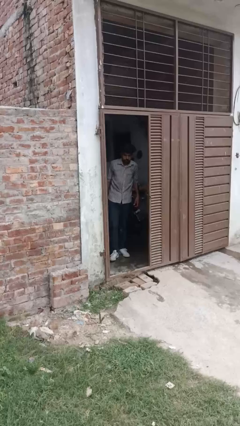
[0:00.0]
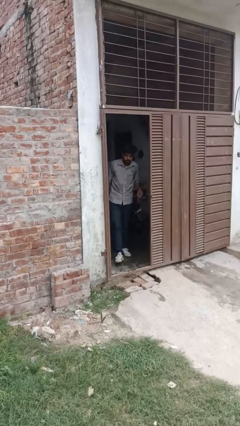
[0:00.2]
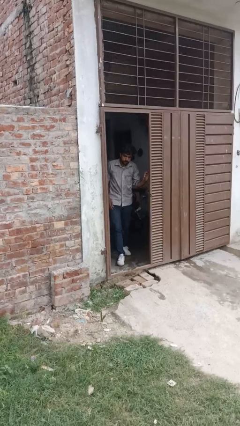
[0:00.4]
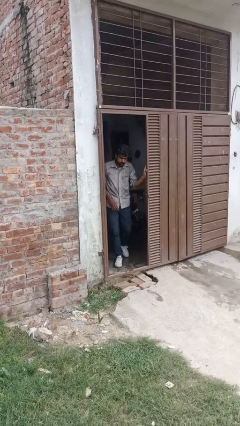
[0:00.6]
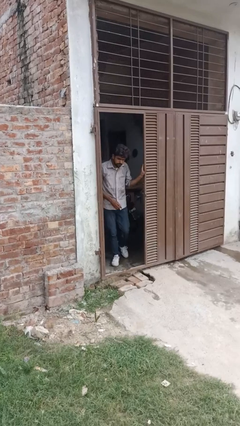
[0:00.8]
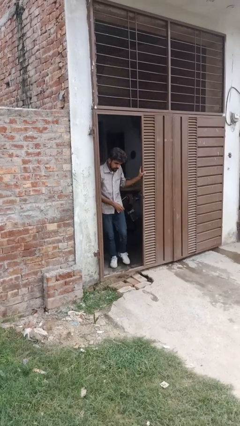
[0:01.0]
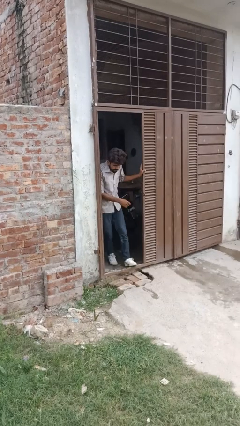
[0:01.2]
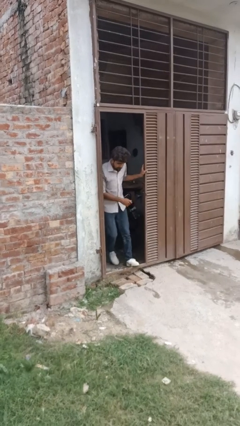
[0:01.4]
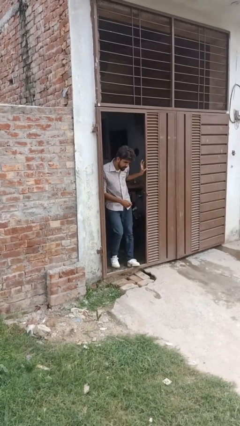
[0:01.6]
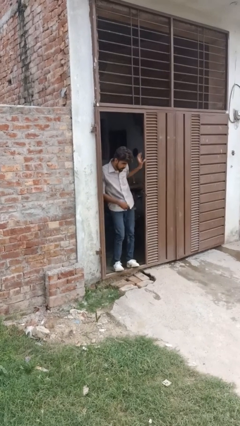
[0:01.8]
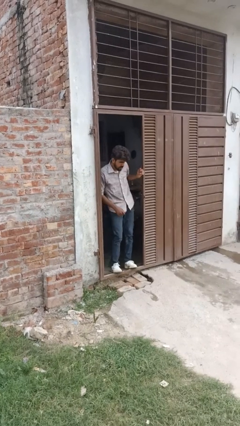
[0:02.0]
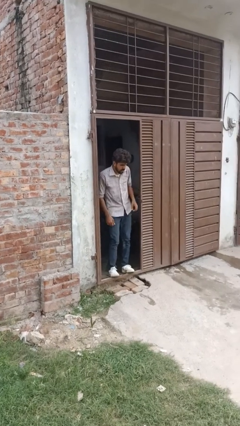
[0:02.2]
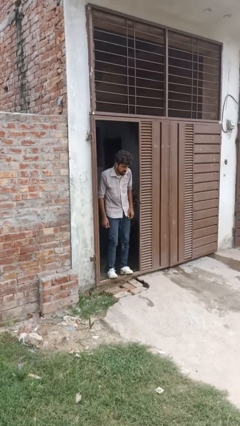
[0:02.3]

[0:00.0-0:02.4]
person bumps into wall

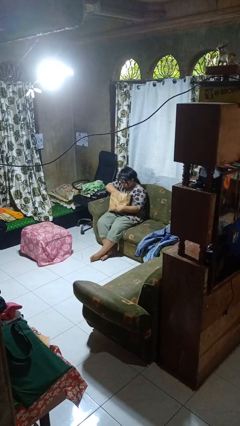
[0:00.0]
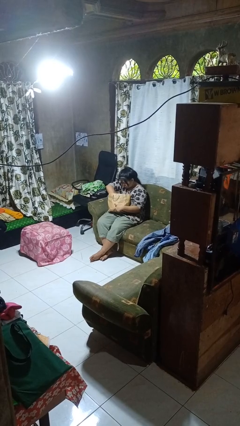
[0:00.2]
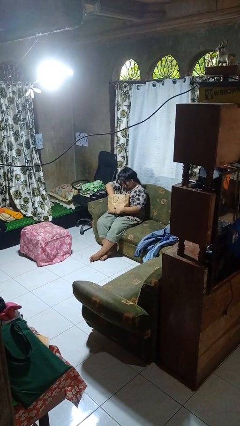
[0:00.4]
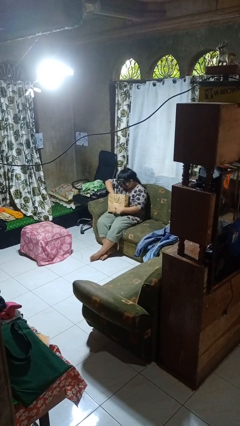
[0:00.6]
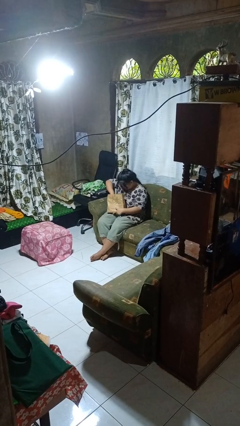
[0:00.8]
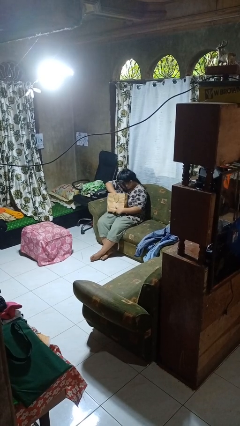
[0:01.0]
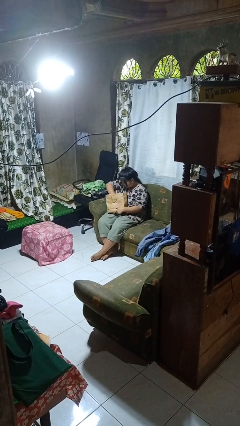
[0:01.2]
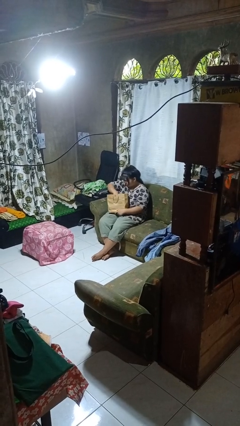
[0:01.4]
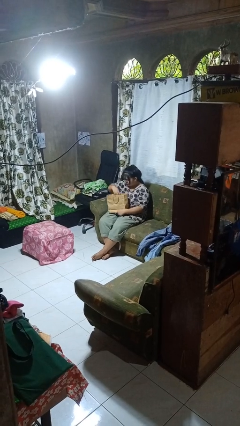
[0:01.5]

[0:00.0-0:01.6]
person searches in bag

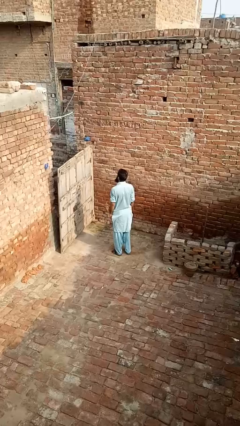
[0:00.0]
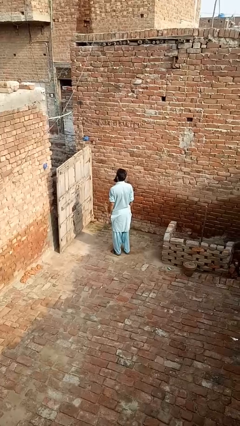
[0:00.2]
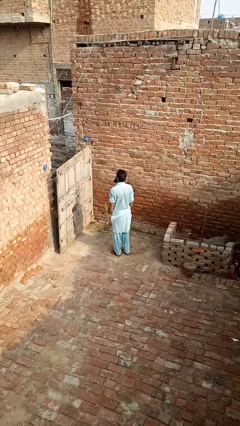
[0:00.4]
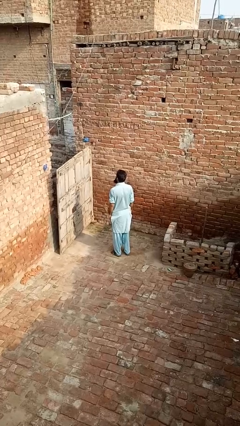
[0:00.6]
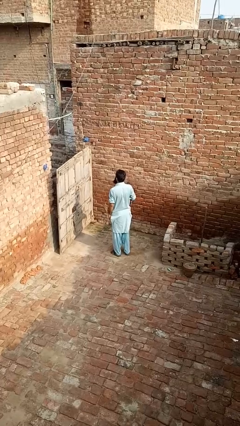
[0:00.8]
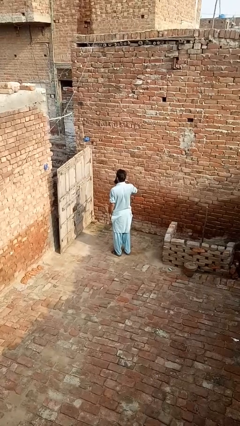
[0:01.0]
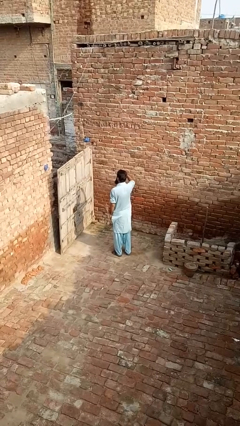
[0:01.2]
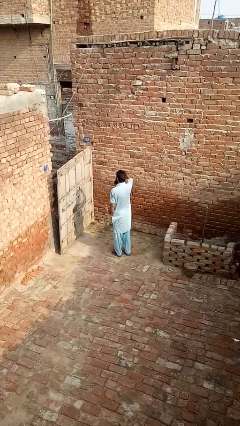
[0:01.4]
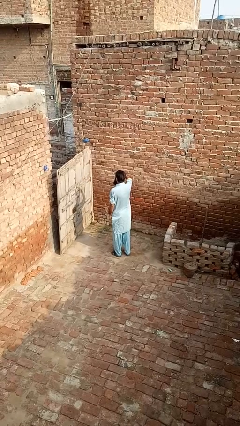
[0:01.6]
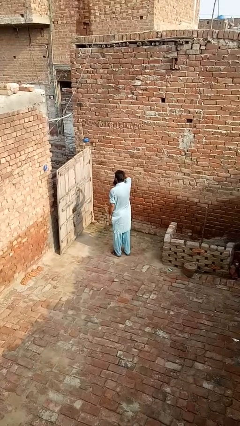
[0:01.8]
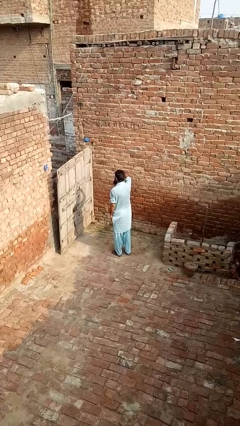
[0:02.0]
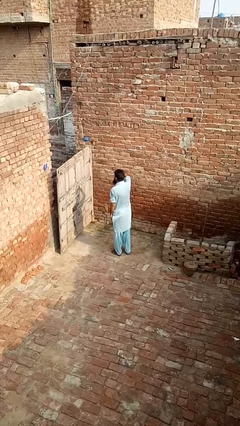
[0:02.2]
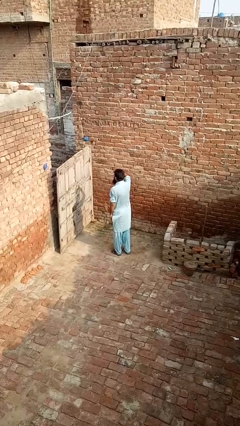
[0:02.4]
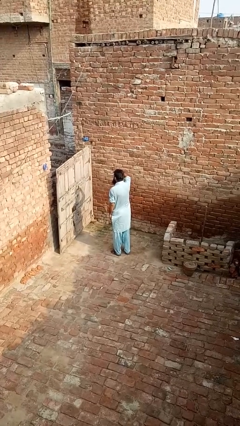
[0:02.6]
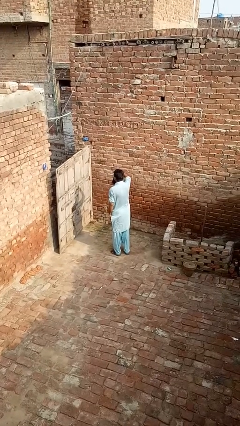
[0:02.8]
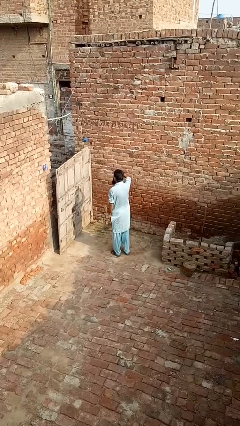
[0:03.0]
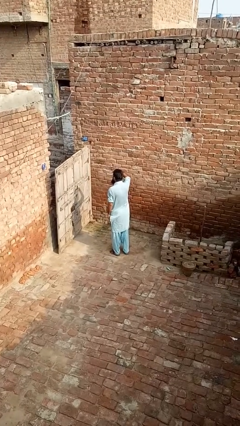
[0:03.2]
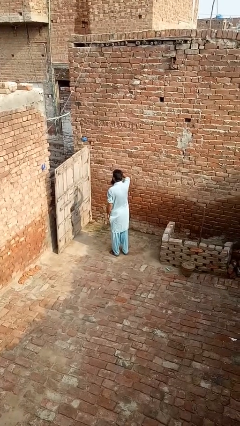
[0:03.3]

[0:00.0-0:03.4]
person shades eyes

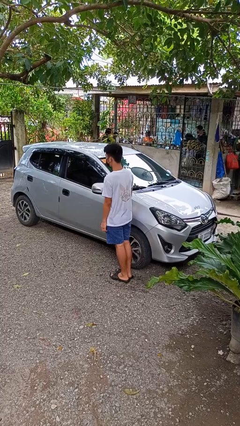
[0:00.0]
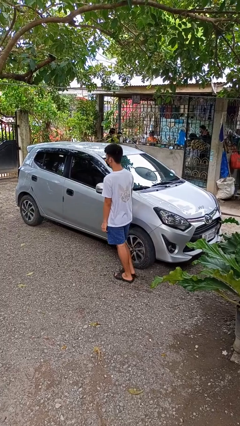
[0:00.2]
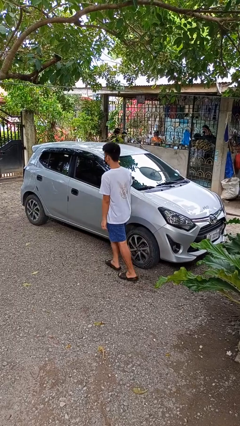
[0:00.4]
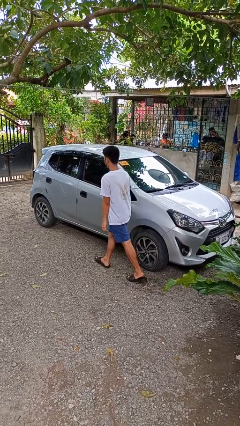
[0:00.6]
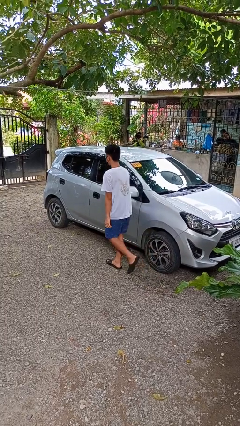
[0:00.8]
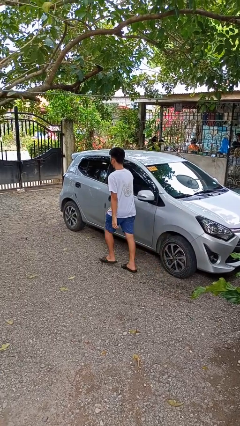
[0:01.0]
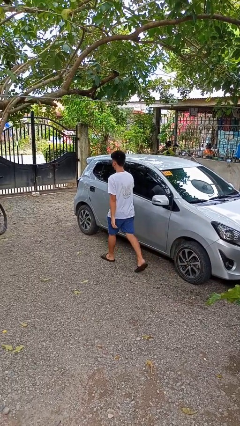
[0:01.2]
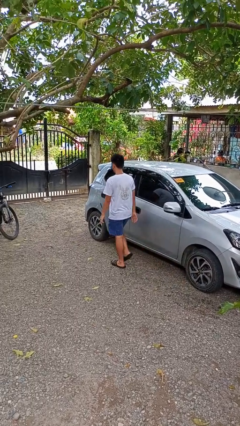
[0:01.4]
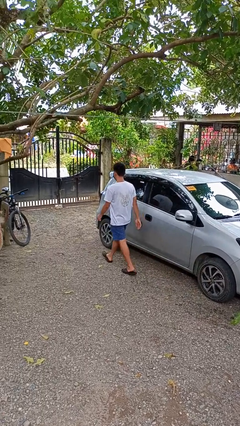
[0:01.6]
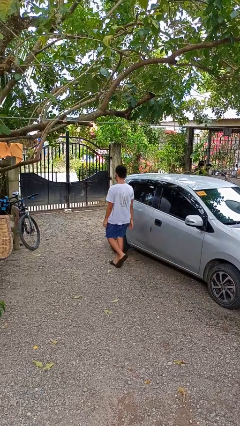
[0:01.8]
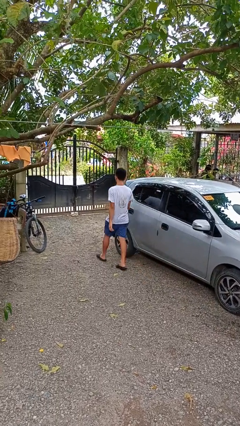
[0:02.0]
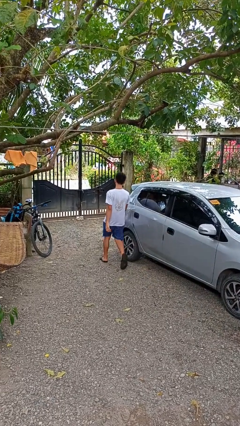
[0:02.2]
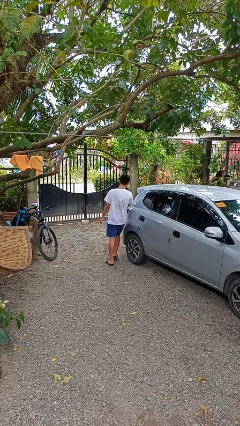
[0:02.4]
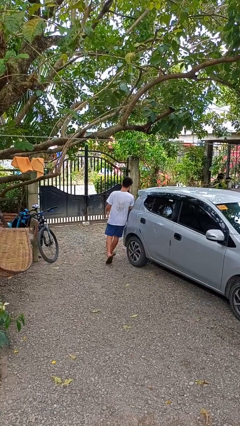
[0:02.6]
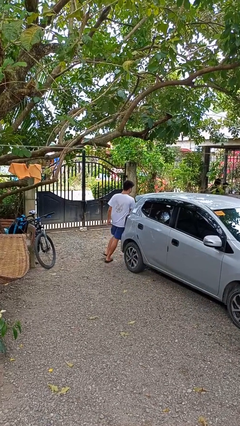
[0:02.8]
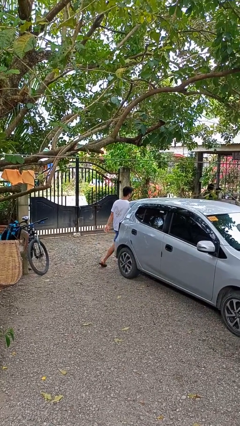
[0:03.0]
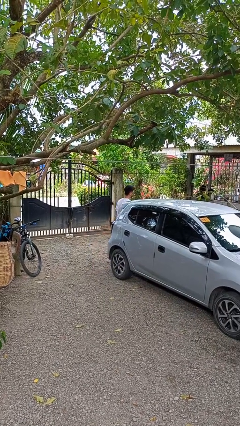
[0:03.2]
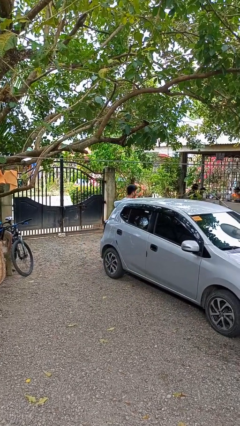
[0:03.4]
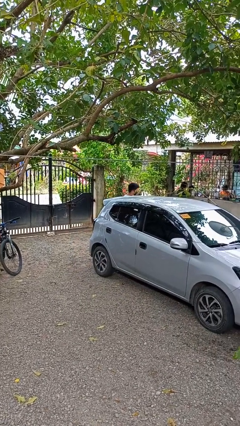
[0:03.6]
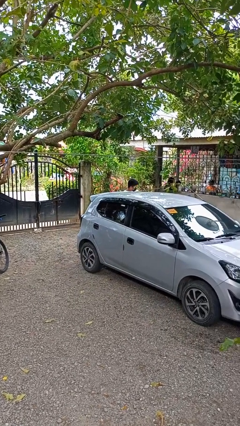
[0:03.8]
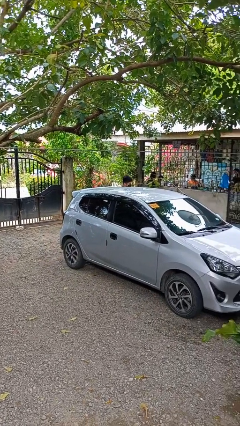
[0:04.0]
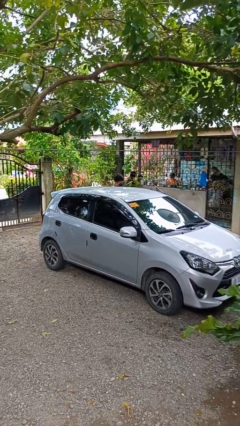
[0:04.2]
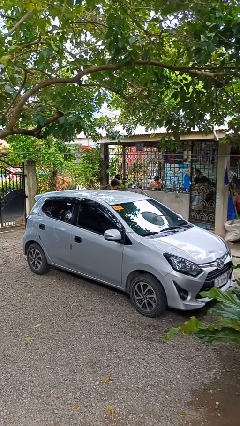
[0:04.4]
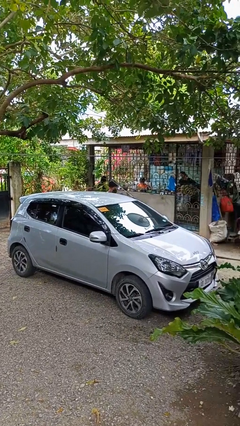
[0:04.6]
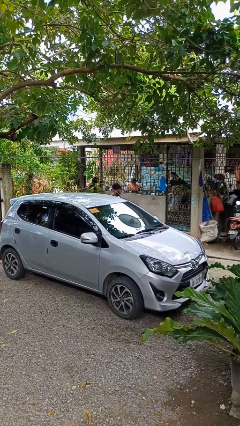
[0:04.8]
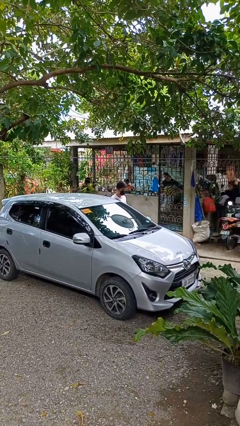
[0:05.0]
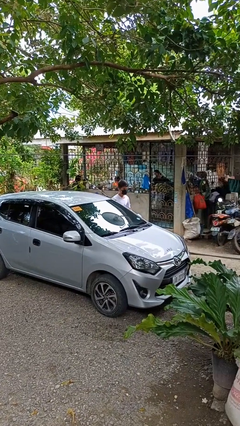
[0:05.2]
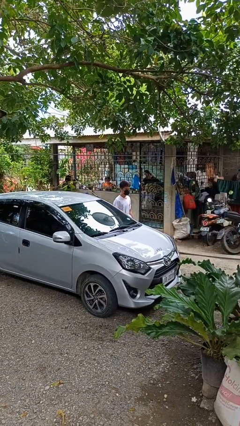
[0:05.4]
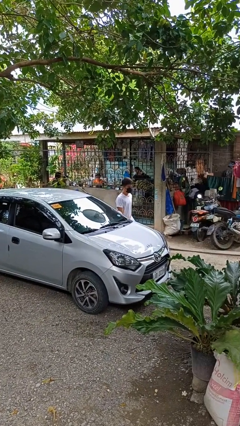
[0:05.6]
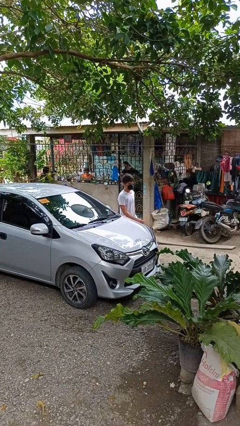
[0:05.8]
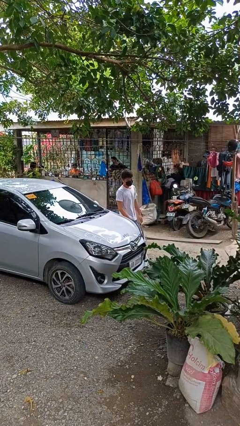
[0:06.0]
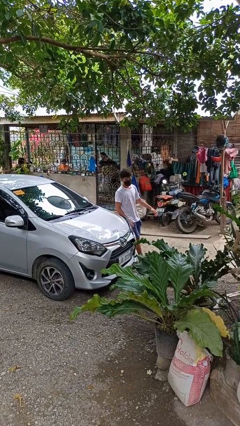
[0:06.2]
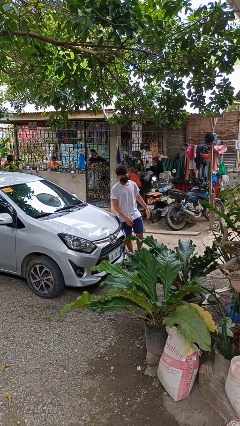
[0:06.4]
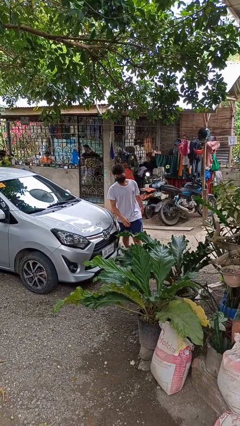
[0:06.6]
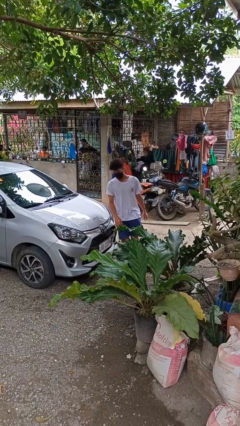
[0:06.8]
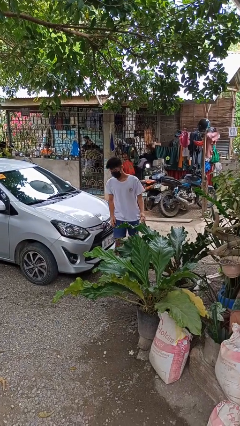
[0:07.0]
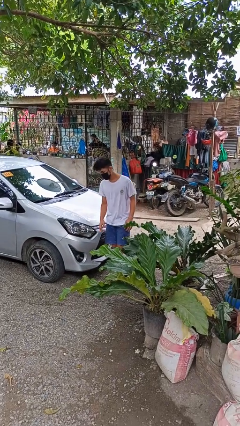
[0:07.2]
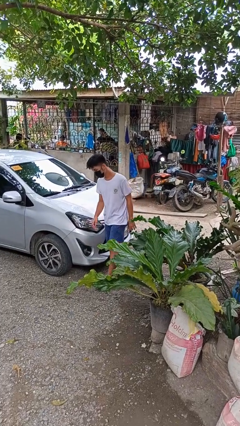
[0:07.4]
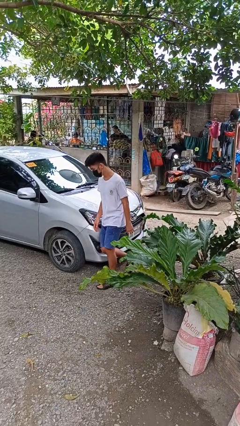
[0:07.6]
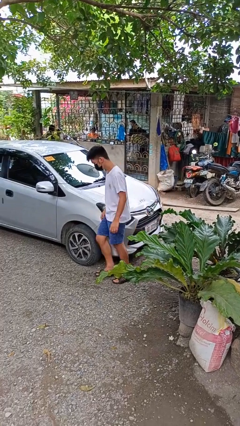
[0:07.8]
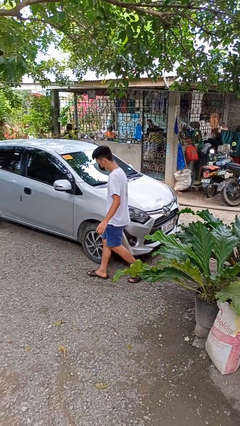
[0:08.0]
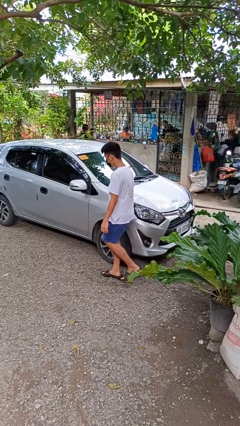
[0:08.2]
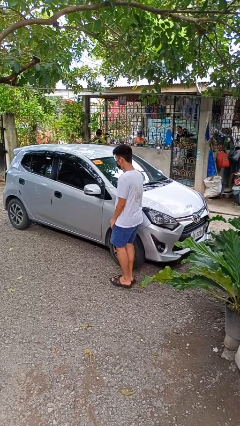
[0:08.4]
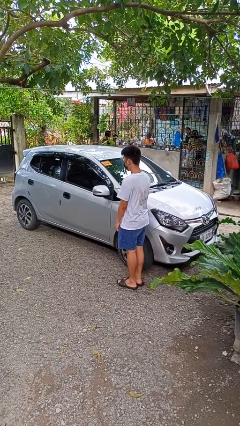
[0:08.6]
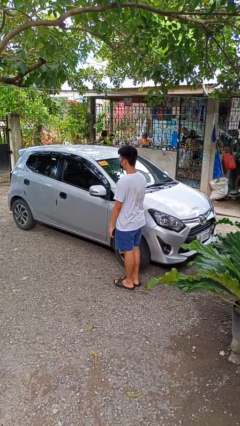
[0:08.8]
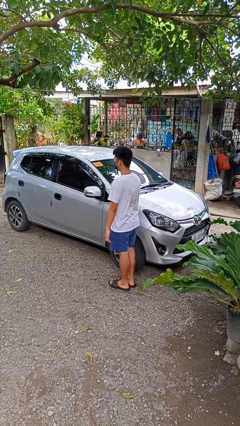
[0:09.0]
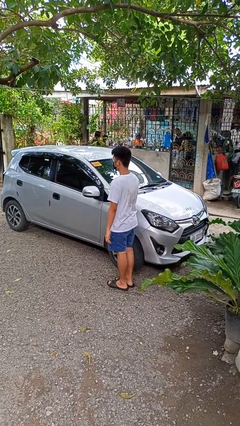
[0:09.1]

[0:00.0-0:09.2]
person walks around car

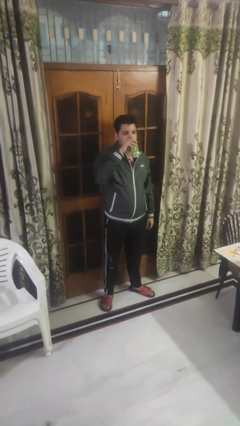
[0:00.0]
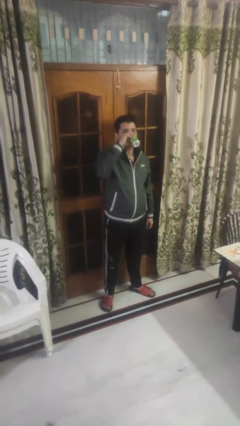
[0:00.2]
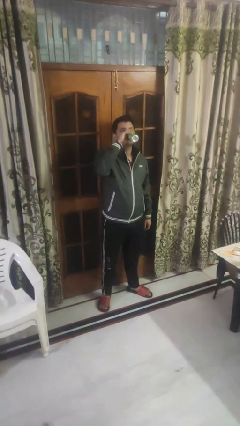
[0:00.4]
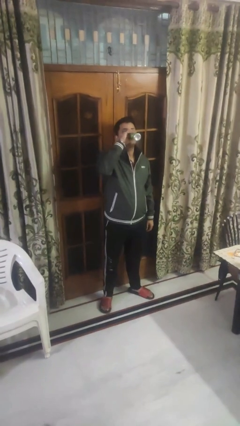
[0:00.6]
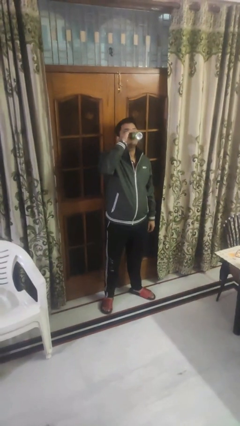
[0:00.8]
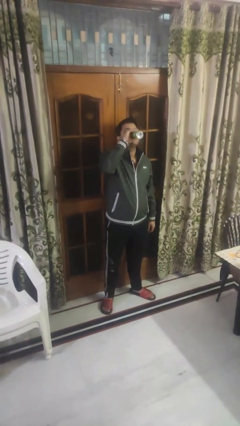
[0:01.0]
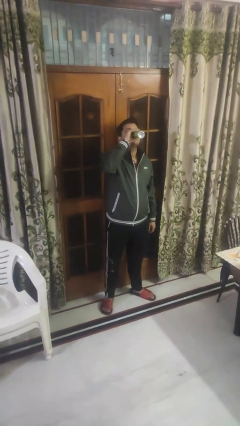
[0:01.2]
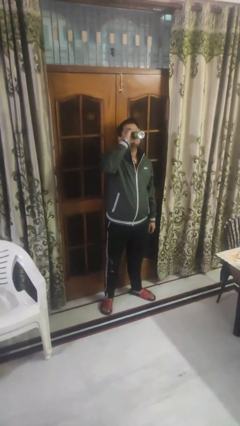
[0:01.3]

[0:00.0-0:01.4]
person drinks from beverage can
